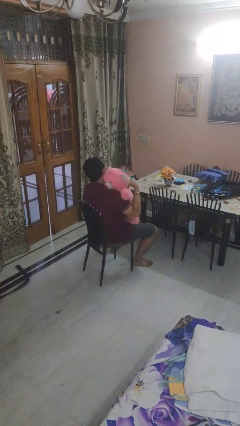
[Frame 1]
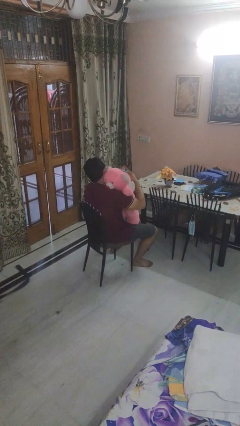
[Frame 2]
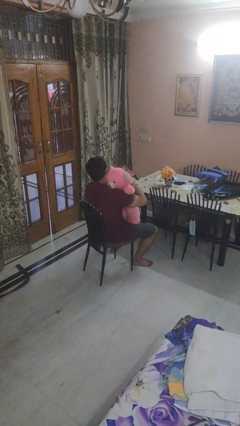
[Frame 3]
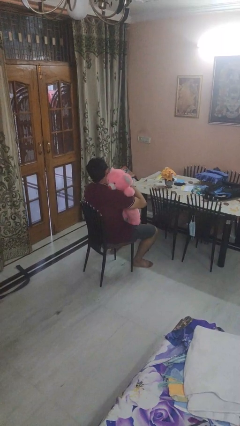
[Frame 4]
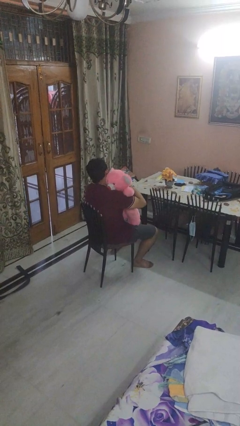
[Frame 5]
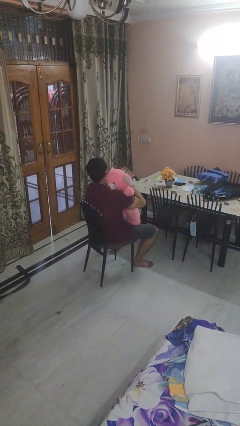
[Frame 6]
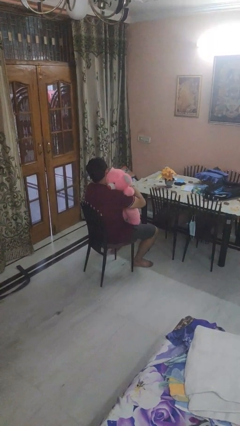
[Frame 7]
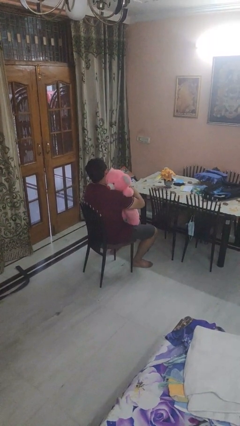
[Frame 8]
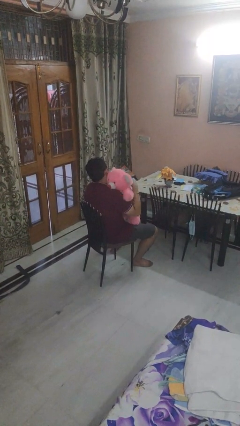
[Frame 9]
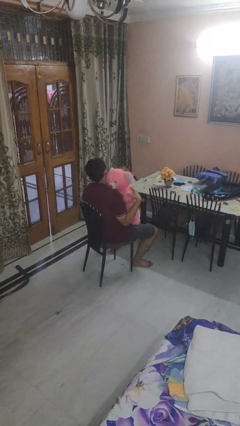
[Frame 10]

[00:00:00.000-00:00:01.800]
person hugs stuffed animal

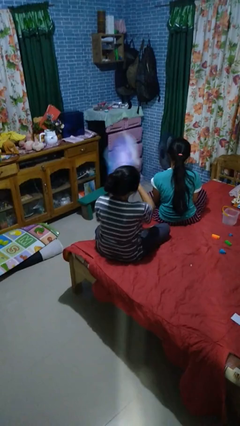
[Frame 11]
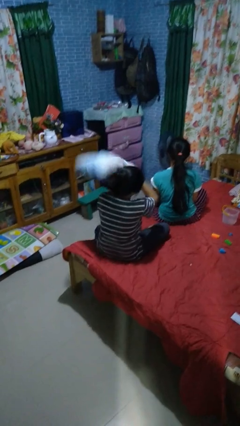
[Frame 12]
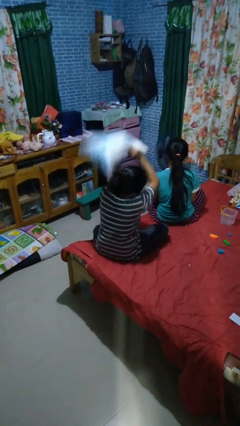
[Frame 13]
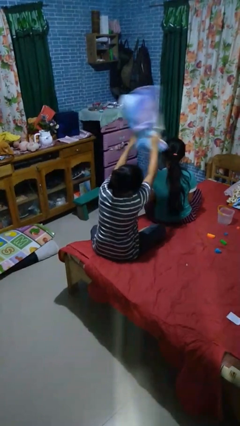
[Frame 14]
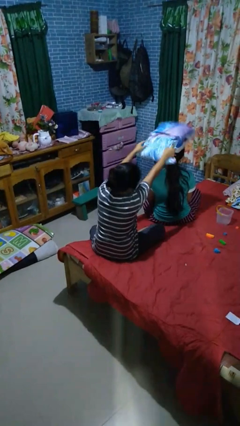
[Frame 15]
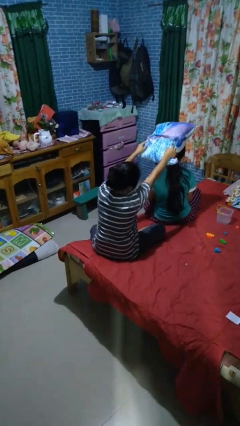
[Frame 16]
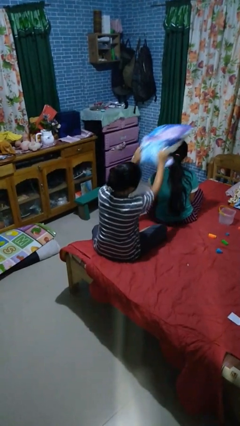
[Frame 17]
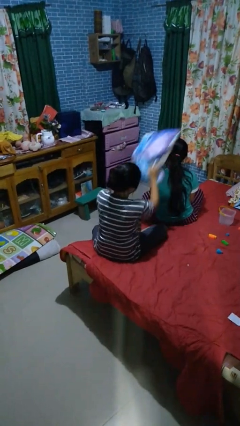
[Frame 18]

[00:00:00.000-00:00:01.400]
person hits person with pillow

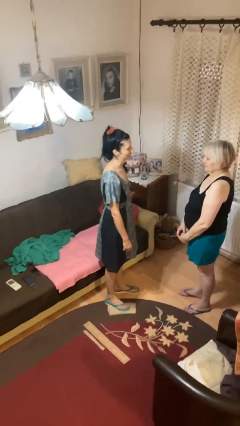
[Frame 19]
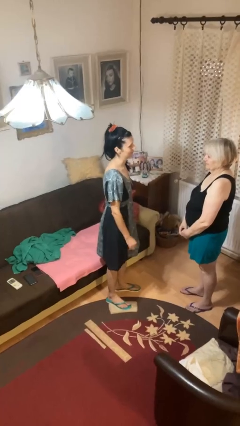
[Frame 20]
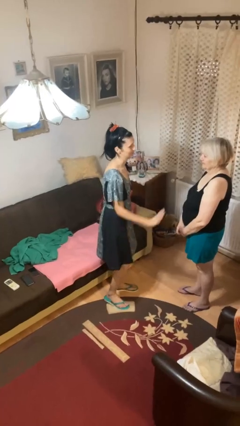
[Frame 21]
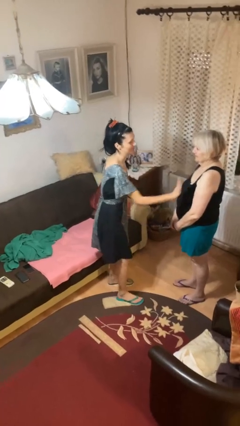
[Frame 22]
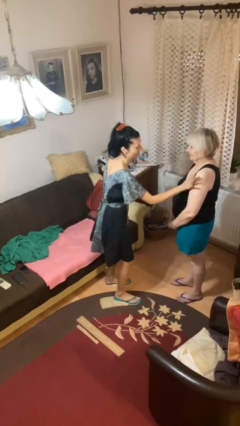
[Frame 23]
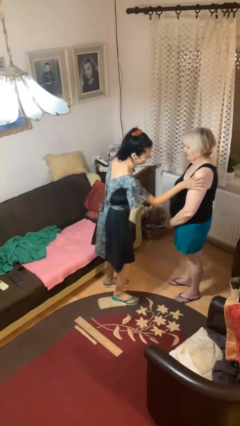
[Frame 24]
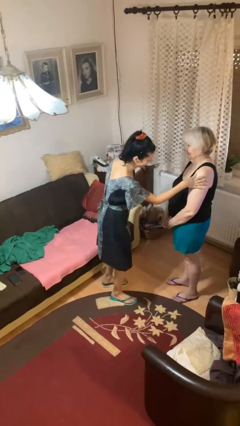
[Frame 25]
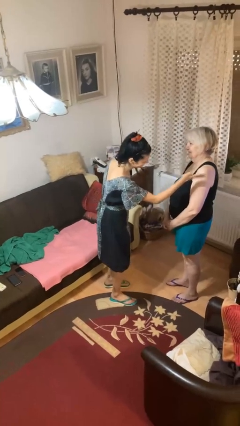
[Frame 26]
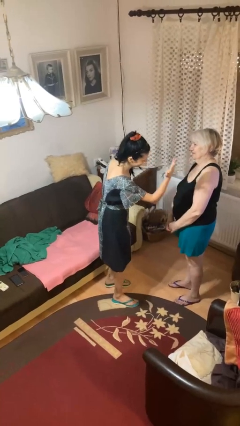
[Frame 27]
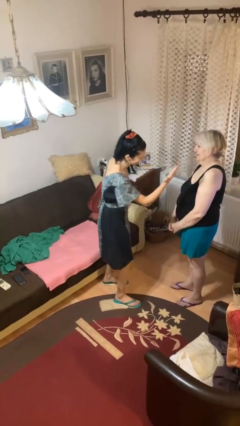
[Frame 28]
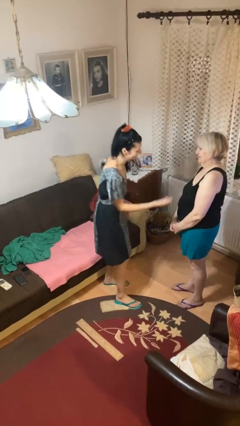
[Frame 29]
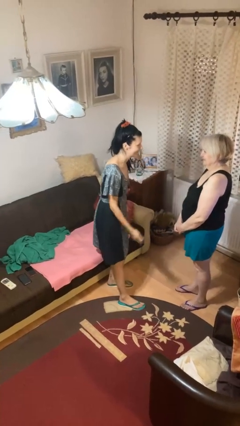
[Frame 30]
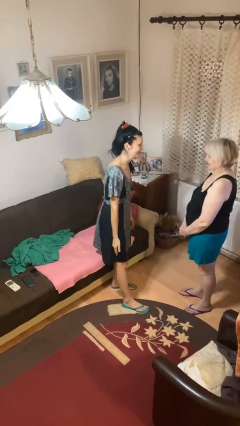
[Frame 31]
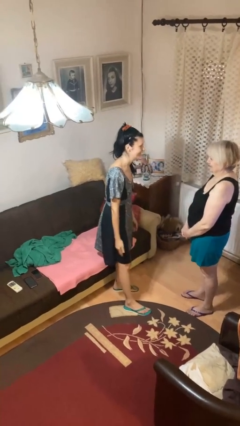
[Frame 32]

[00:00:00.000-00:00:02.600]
person shoves person

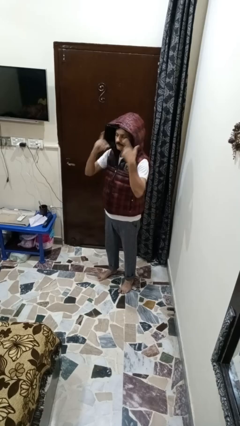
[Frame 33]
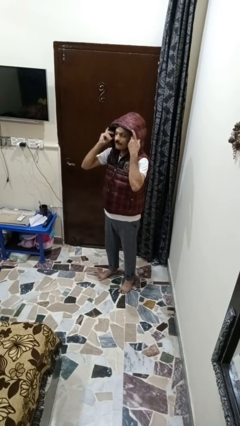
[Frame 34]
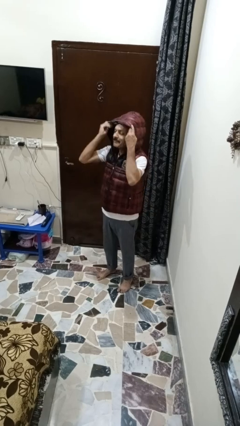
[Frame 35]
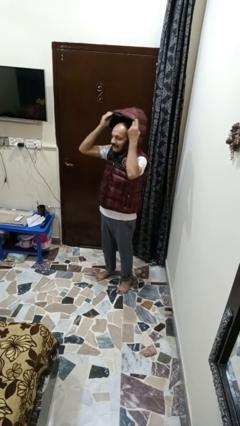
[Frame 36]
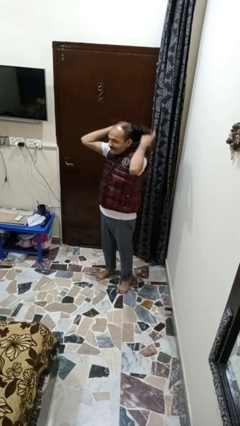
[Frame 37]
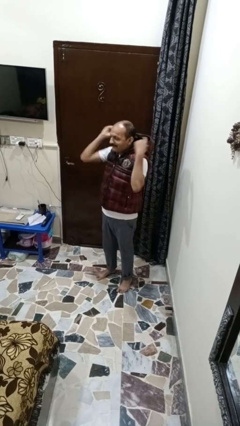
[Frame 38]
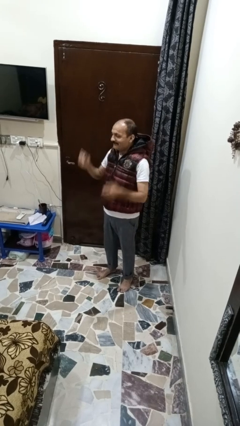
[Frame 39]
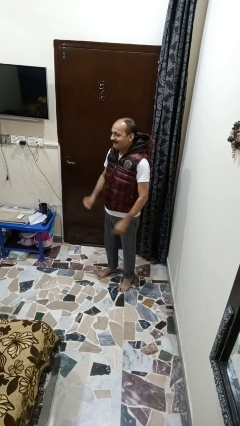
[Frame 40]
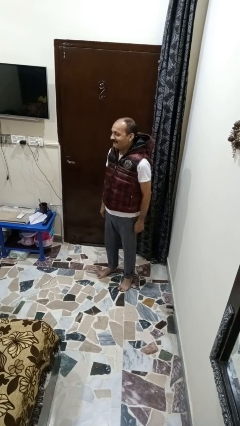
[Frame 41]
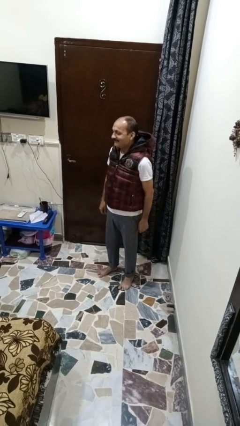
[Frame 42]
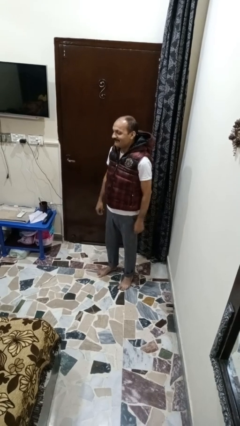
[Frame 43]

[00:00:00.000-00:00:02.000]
person takes off hoodie

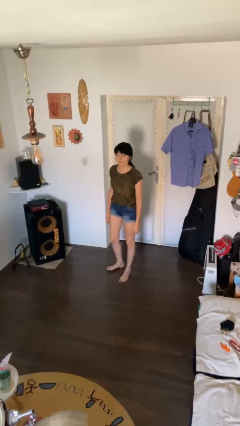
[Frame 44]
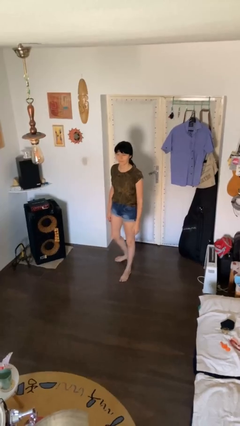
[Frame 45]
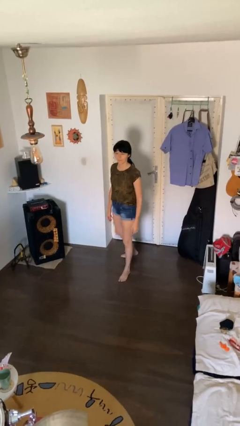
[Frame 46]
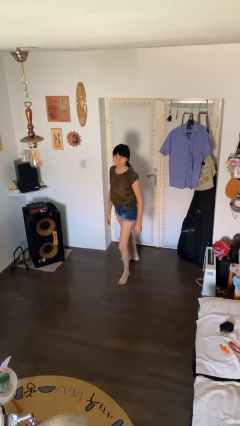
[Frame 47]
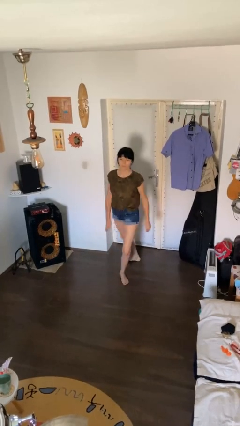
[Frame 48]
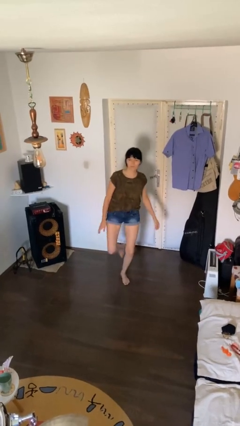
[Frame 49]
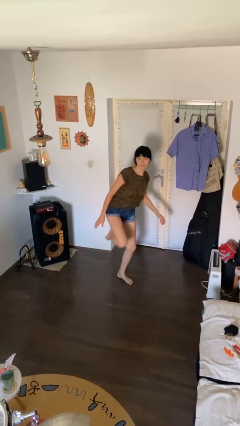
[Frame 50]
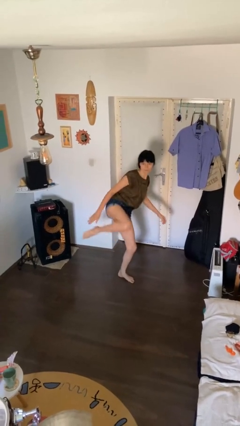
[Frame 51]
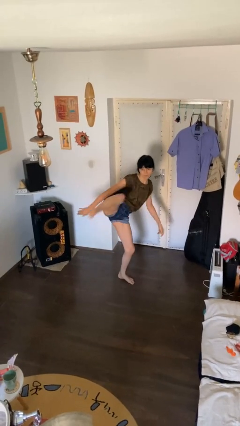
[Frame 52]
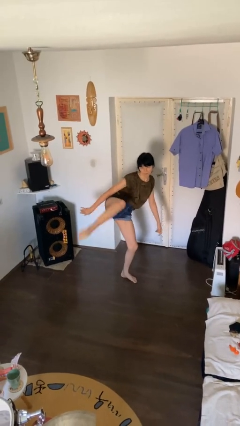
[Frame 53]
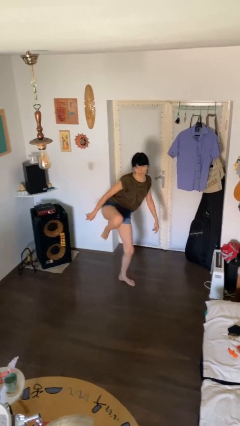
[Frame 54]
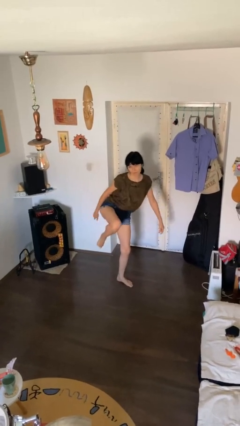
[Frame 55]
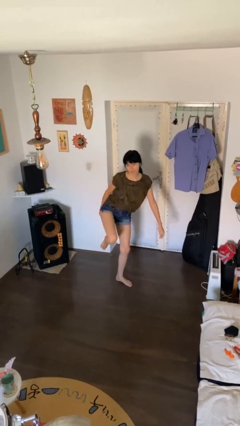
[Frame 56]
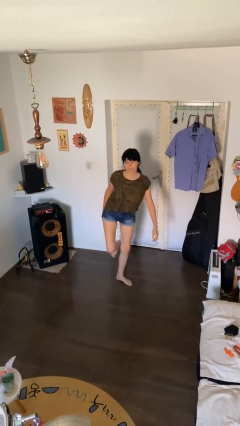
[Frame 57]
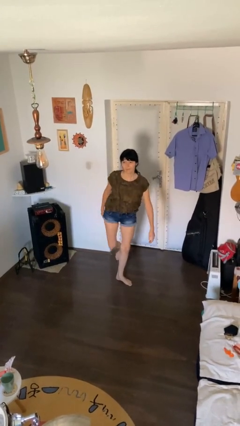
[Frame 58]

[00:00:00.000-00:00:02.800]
person karate kicks

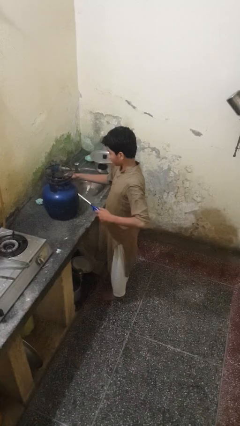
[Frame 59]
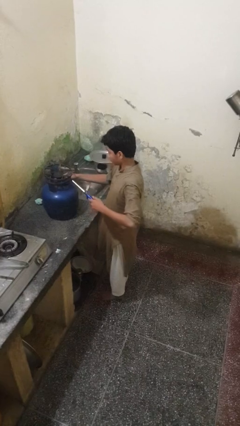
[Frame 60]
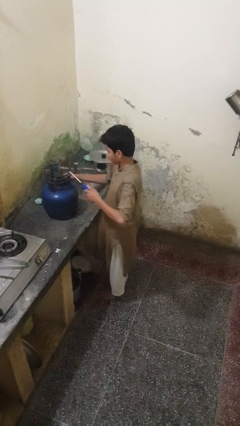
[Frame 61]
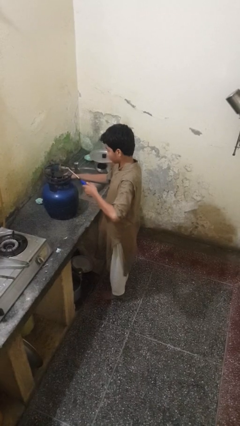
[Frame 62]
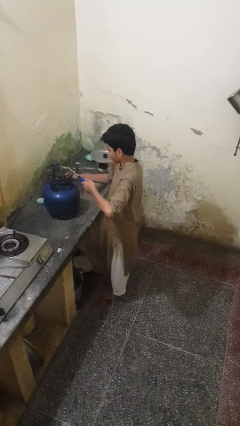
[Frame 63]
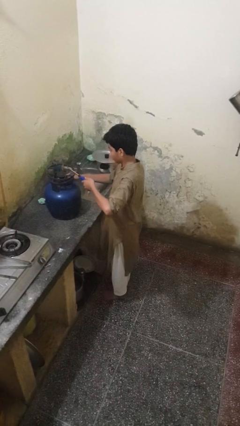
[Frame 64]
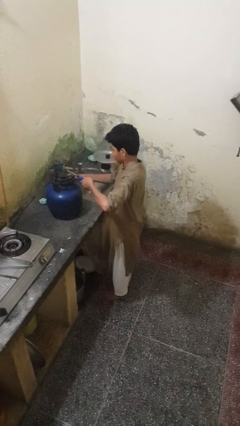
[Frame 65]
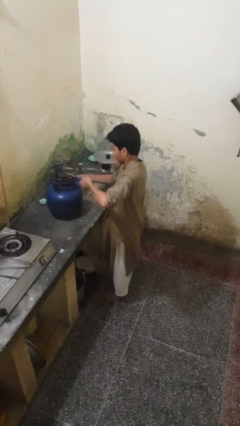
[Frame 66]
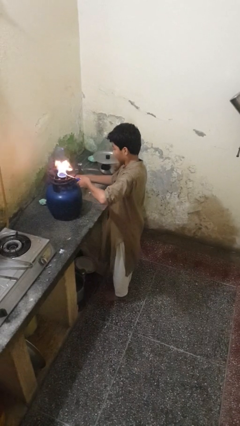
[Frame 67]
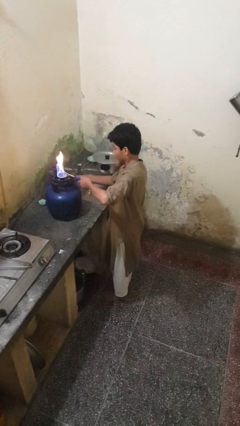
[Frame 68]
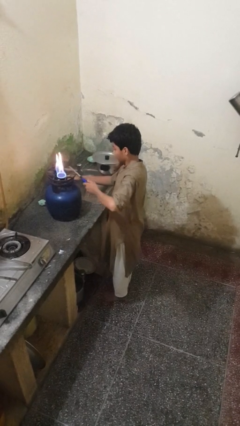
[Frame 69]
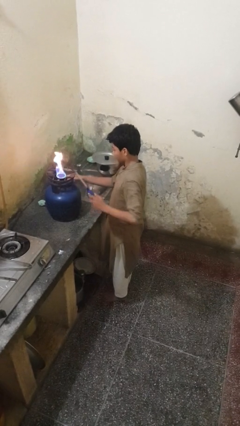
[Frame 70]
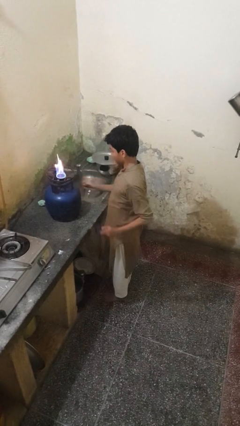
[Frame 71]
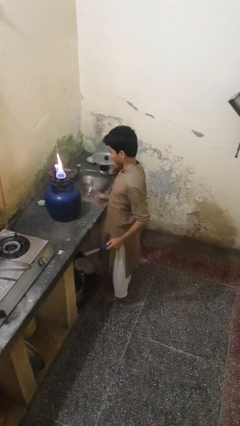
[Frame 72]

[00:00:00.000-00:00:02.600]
person turns on stovetop

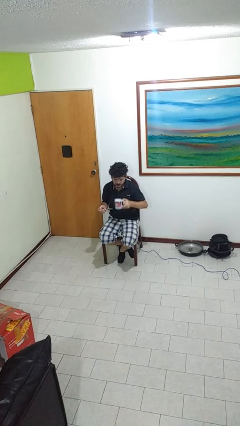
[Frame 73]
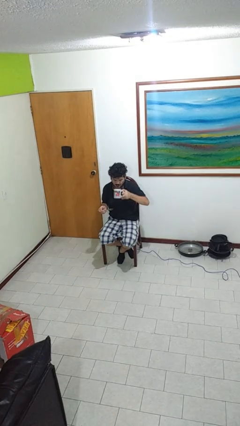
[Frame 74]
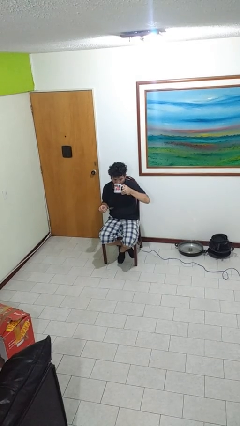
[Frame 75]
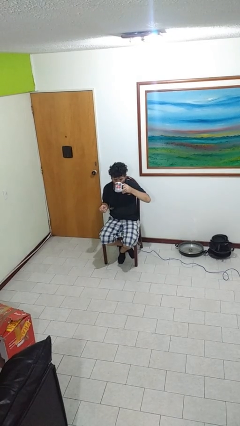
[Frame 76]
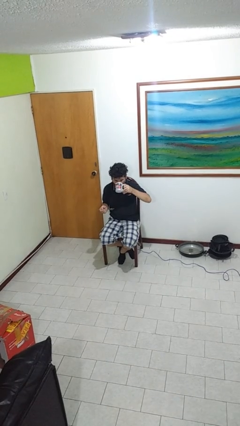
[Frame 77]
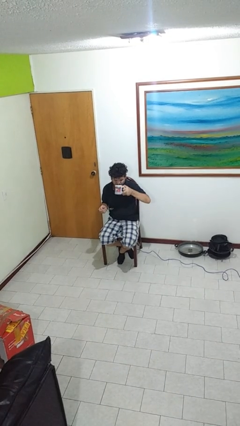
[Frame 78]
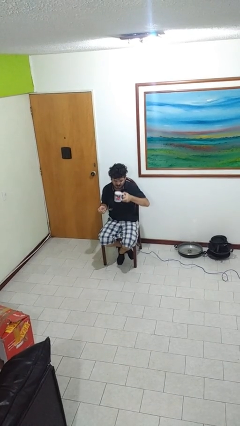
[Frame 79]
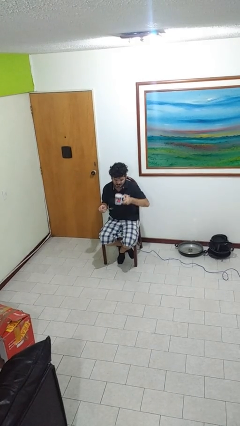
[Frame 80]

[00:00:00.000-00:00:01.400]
person drinks from mug

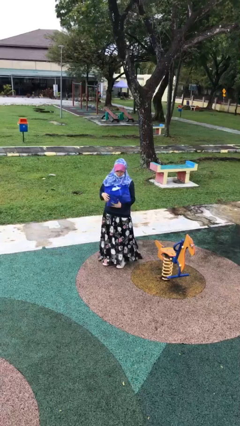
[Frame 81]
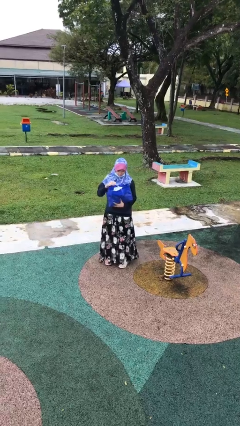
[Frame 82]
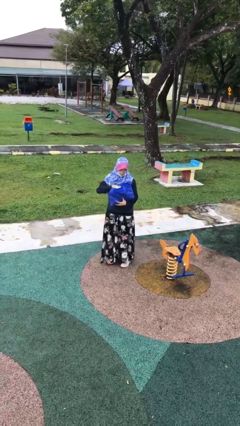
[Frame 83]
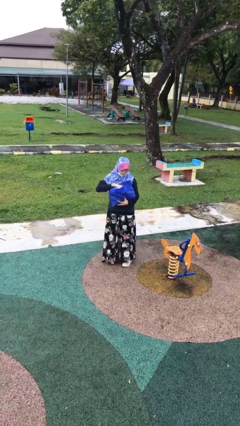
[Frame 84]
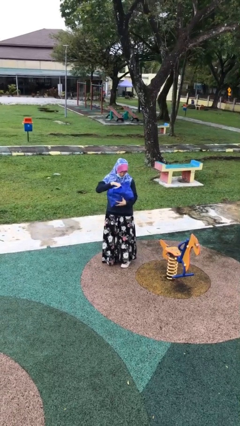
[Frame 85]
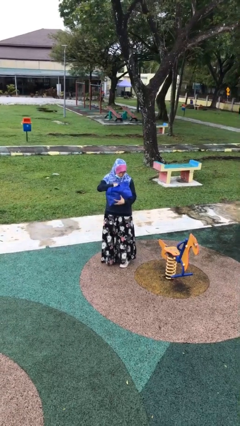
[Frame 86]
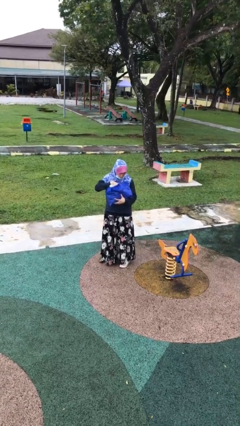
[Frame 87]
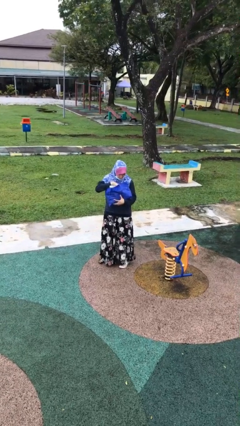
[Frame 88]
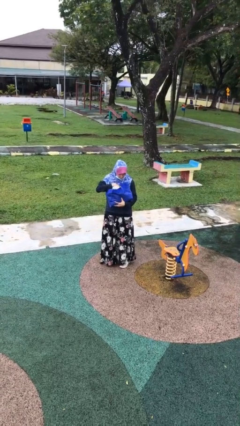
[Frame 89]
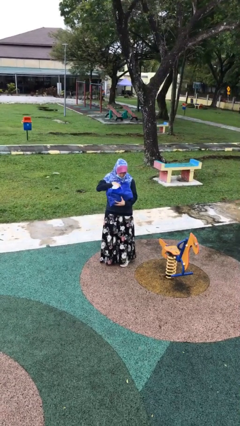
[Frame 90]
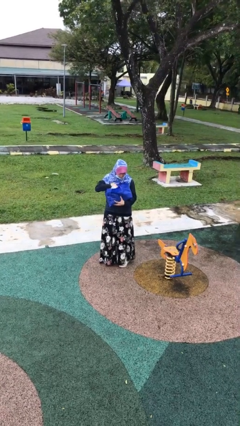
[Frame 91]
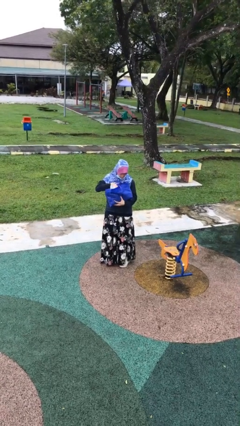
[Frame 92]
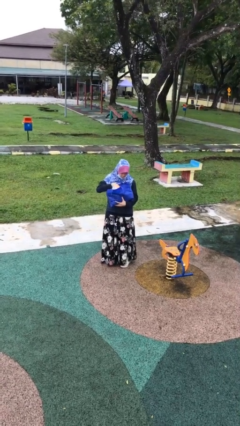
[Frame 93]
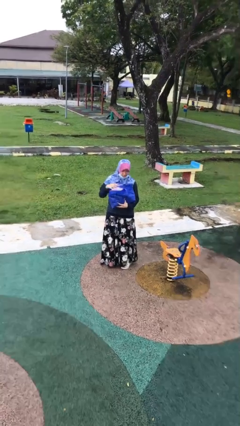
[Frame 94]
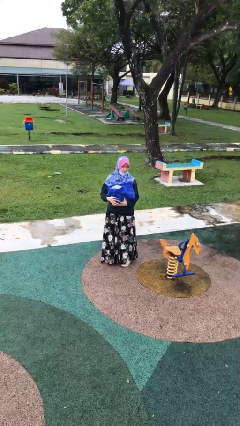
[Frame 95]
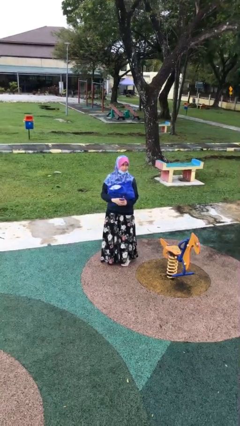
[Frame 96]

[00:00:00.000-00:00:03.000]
person searches in bag
